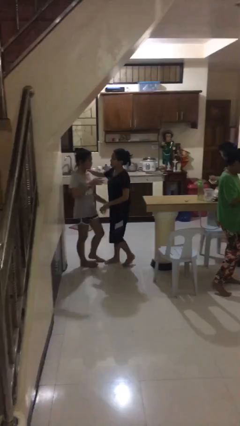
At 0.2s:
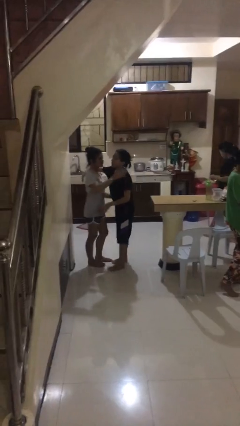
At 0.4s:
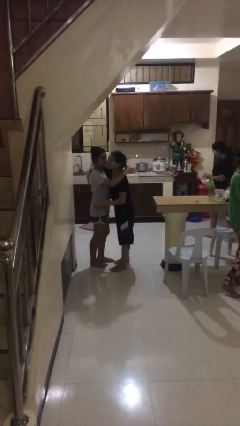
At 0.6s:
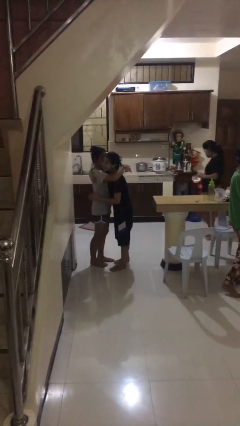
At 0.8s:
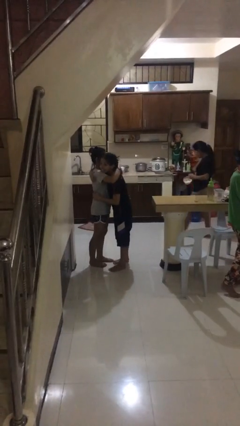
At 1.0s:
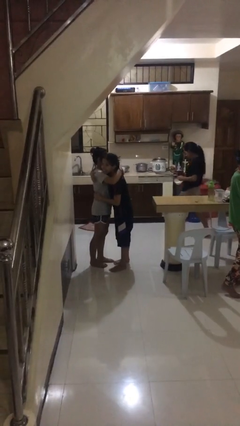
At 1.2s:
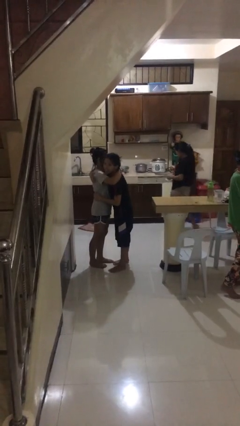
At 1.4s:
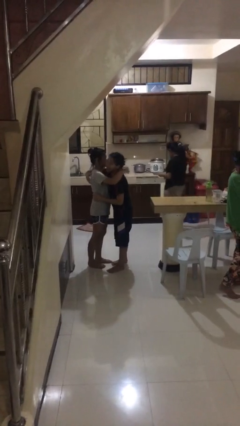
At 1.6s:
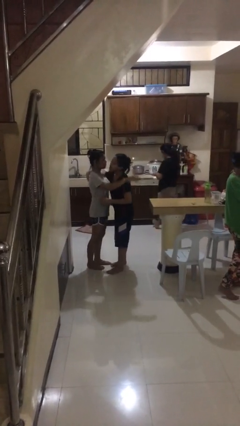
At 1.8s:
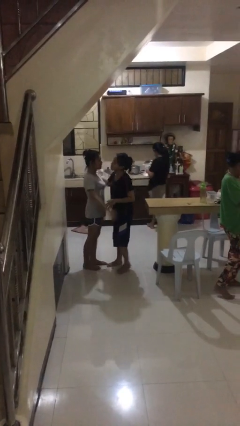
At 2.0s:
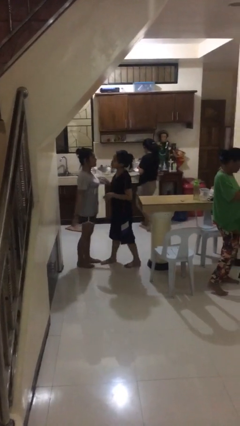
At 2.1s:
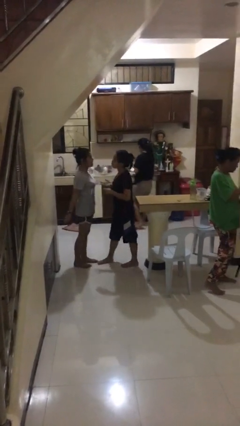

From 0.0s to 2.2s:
person embraces person

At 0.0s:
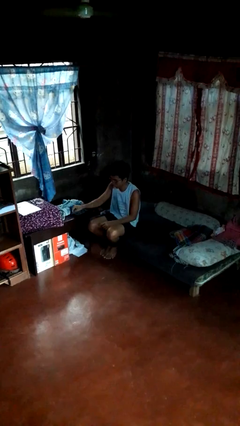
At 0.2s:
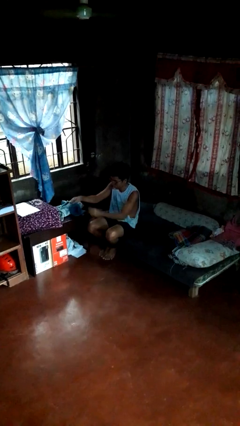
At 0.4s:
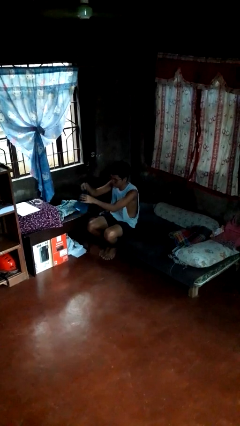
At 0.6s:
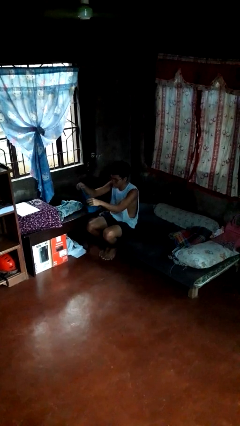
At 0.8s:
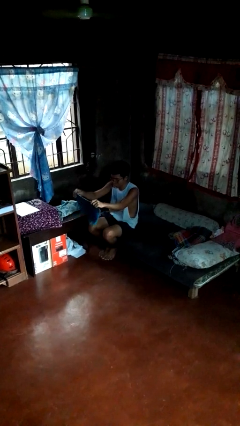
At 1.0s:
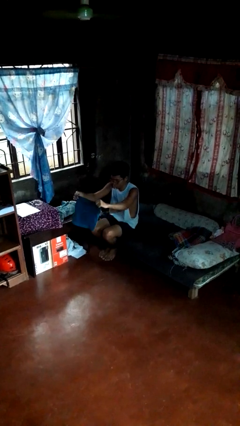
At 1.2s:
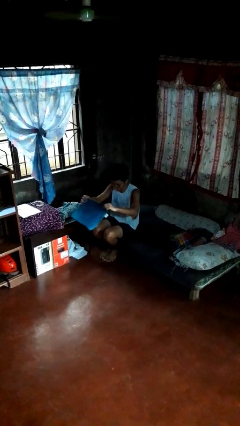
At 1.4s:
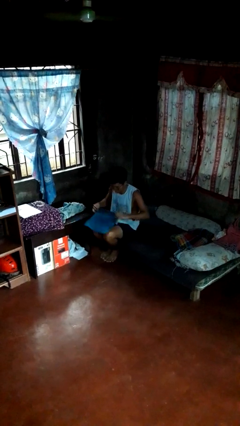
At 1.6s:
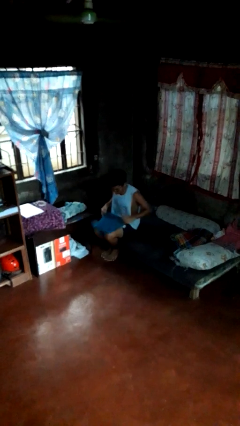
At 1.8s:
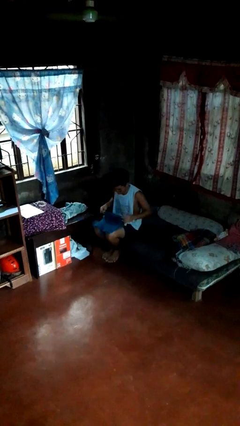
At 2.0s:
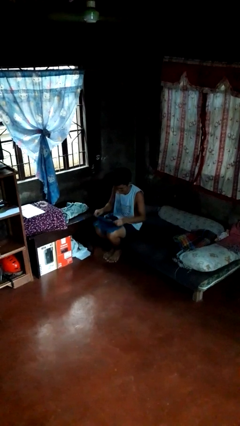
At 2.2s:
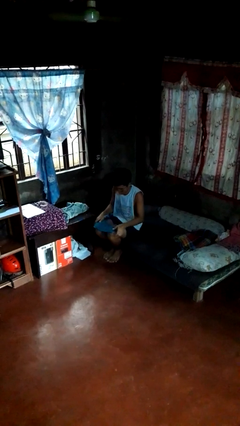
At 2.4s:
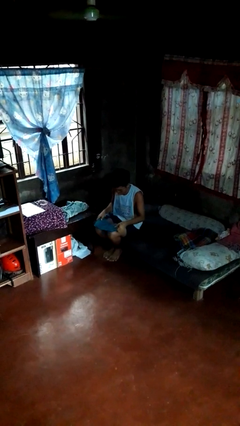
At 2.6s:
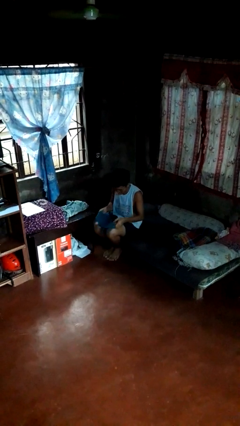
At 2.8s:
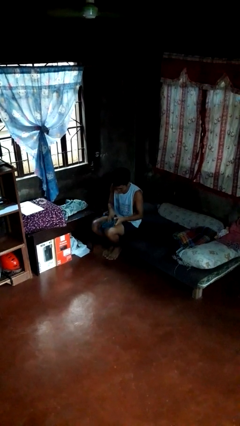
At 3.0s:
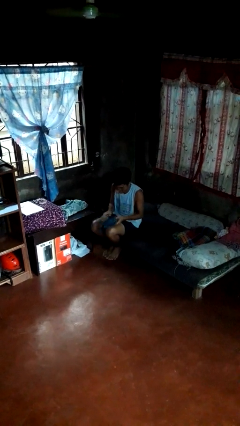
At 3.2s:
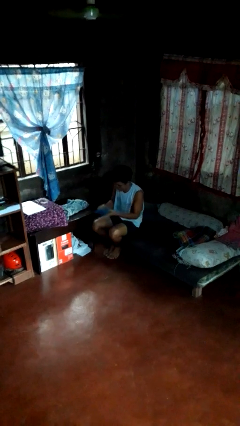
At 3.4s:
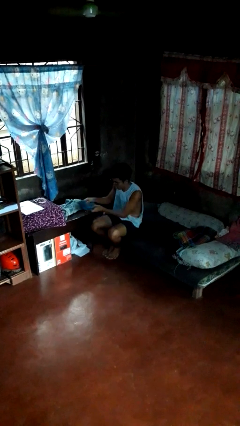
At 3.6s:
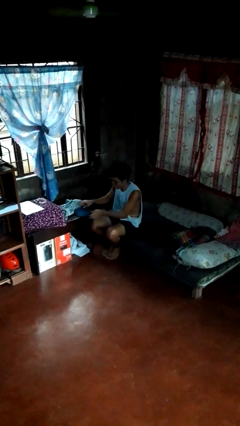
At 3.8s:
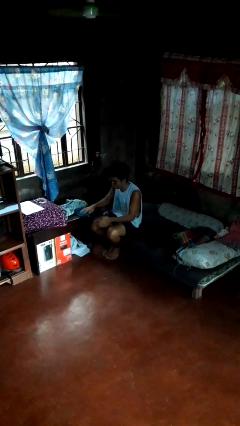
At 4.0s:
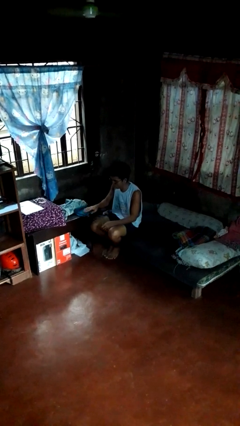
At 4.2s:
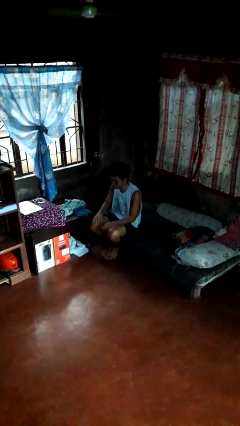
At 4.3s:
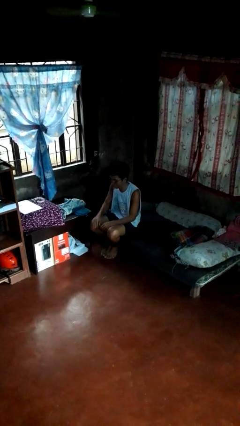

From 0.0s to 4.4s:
person folds towel

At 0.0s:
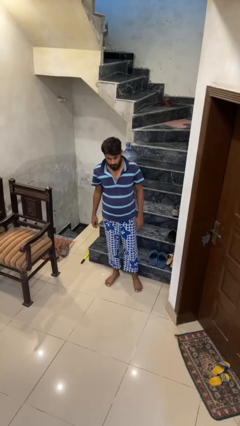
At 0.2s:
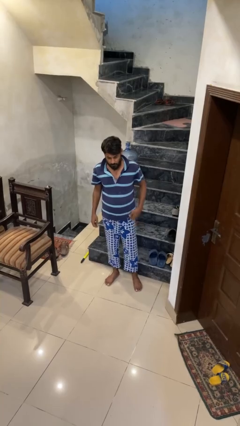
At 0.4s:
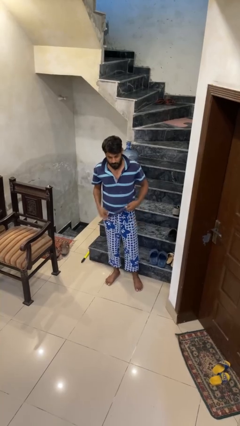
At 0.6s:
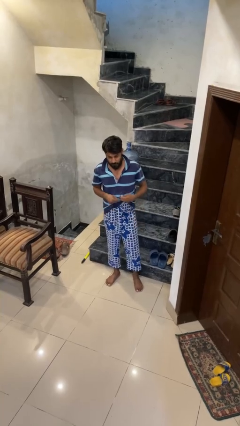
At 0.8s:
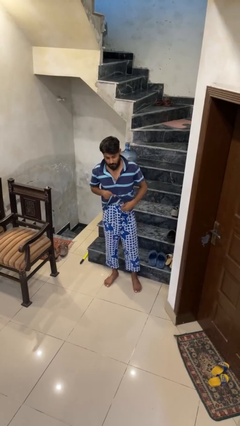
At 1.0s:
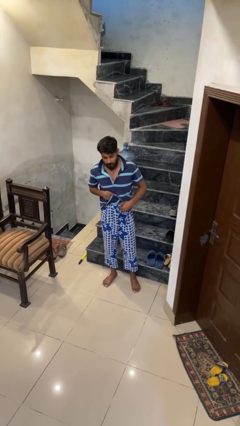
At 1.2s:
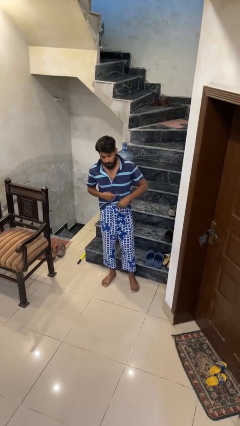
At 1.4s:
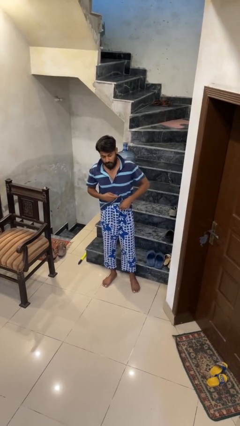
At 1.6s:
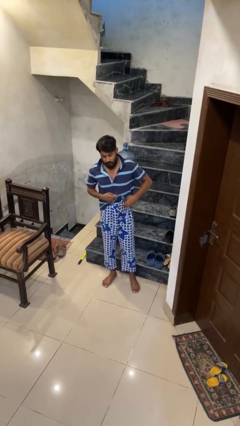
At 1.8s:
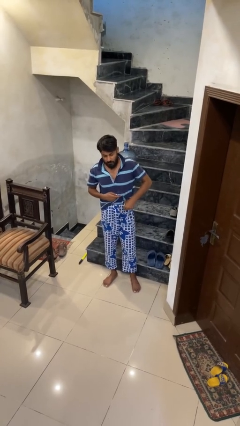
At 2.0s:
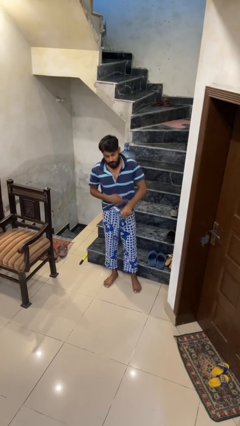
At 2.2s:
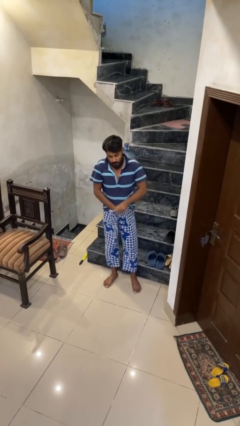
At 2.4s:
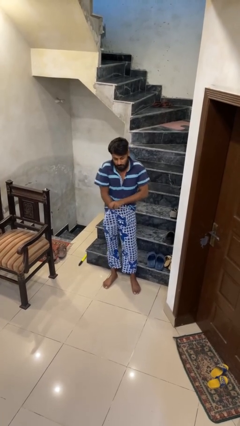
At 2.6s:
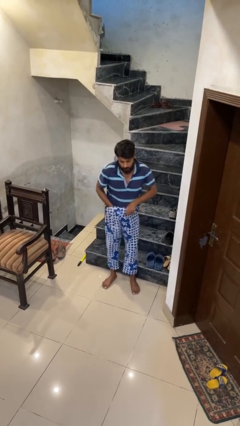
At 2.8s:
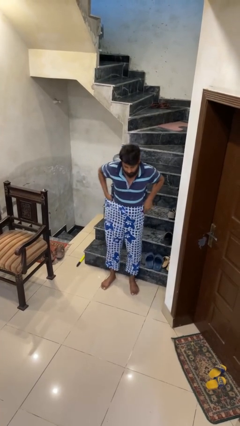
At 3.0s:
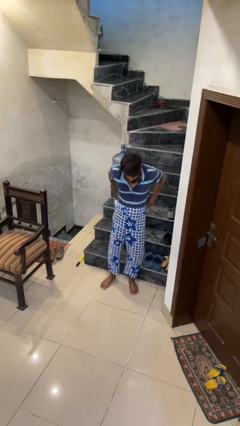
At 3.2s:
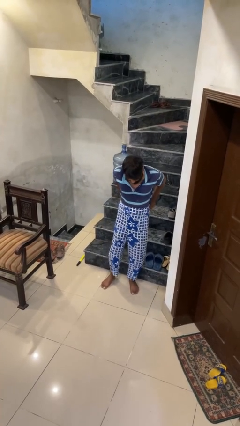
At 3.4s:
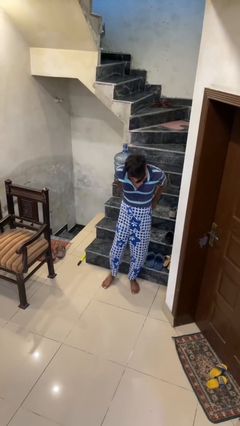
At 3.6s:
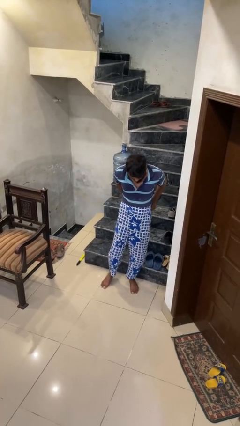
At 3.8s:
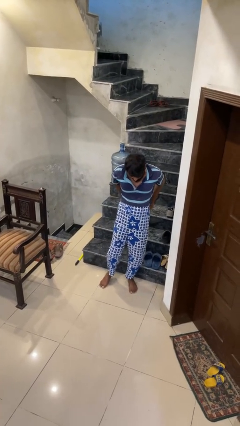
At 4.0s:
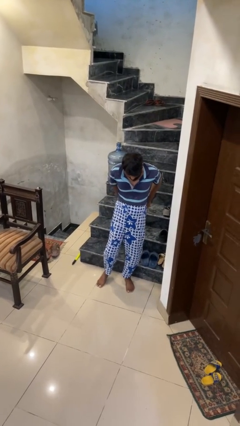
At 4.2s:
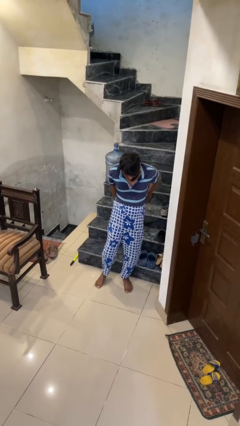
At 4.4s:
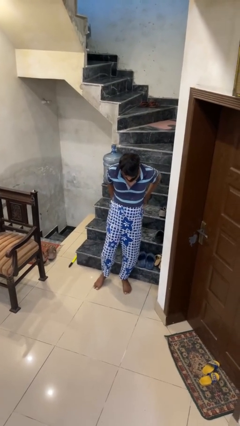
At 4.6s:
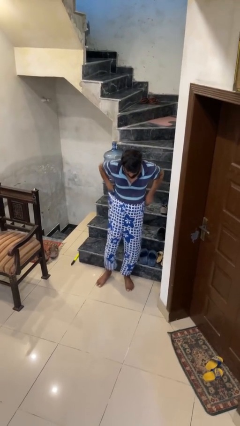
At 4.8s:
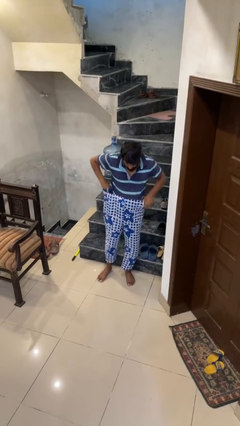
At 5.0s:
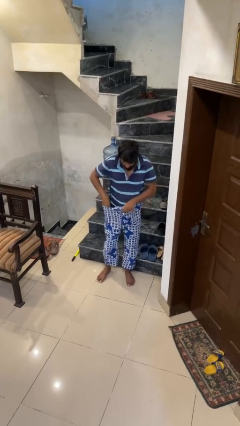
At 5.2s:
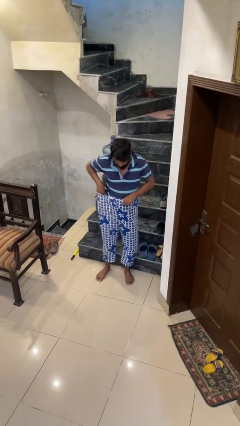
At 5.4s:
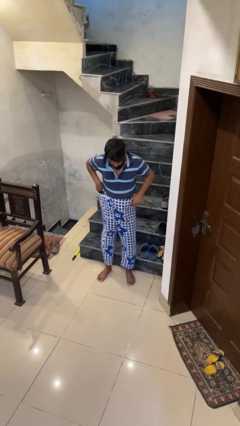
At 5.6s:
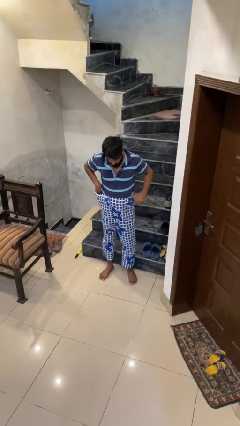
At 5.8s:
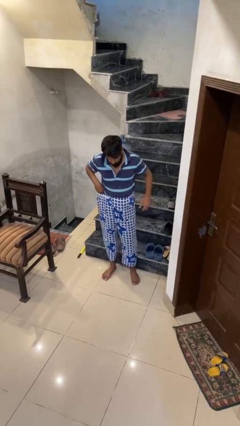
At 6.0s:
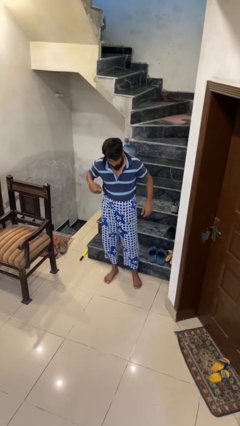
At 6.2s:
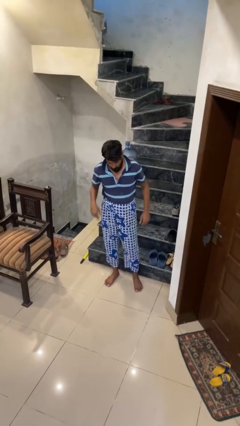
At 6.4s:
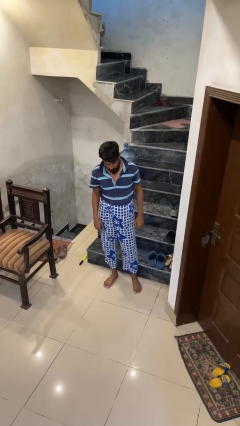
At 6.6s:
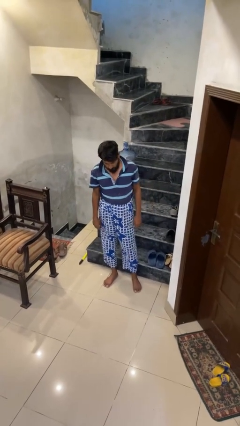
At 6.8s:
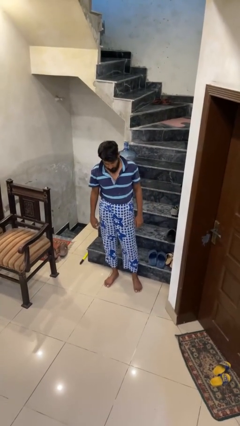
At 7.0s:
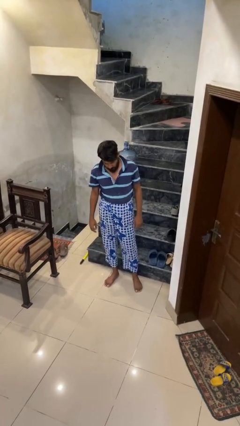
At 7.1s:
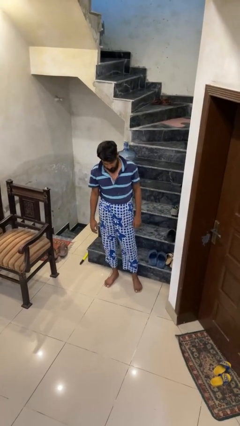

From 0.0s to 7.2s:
person tucks in shirt

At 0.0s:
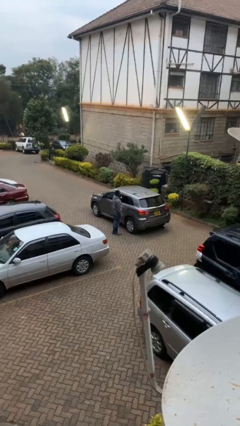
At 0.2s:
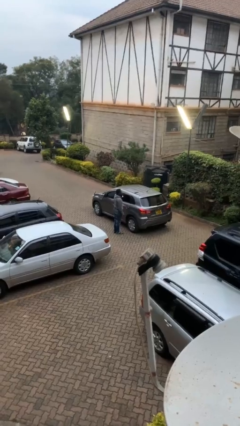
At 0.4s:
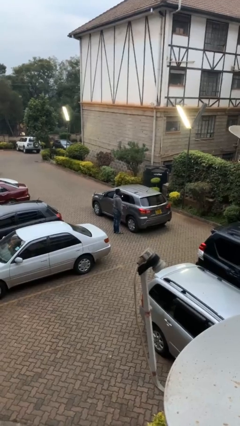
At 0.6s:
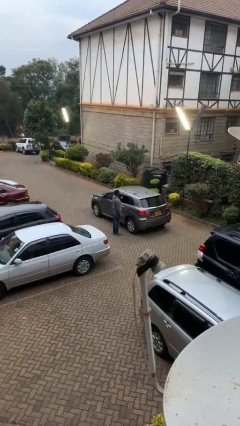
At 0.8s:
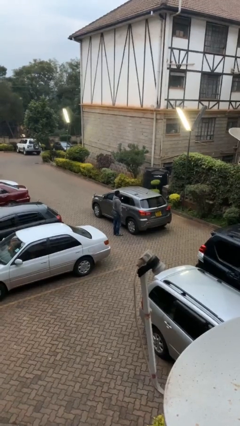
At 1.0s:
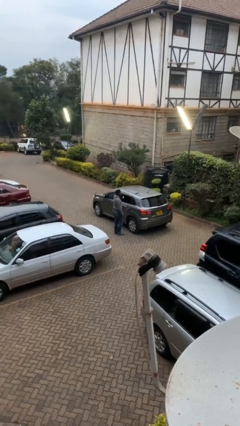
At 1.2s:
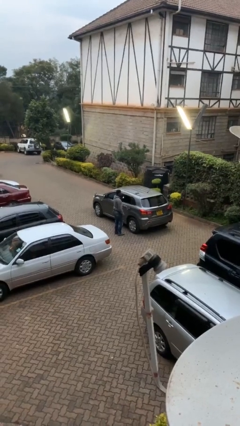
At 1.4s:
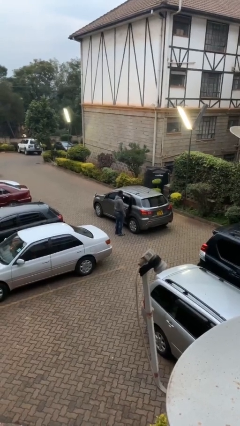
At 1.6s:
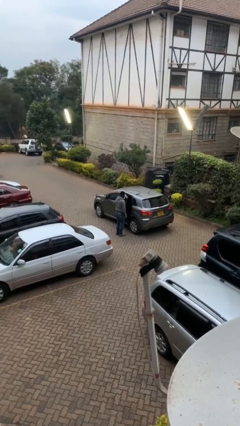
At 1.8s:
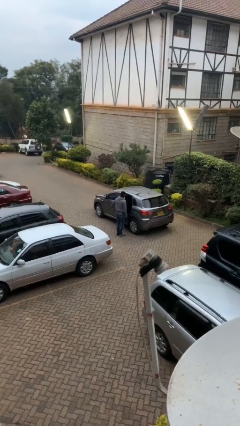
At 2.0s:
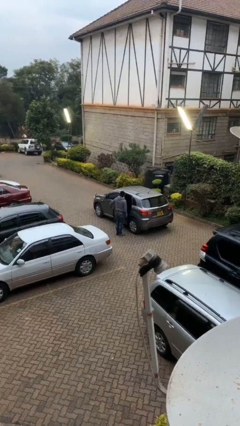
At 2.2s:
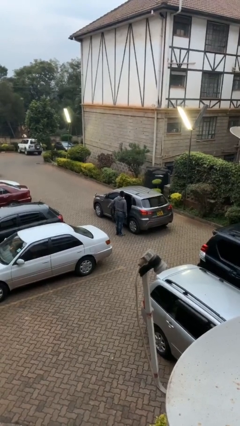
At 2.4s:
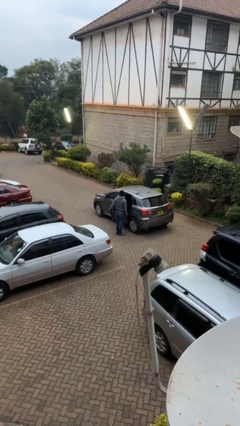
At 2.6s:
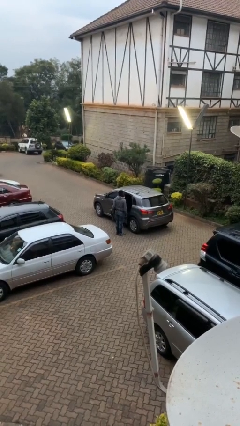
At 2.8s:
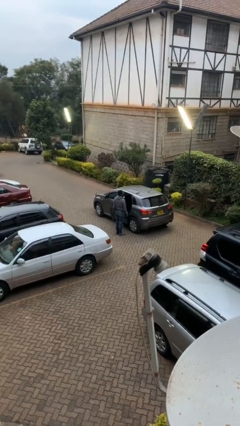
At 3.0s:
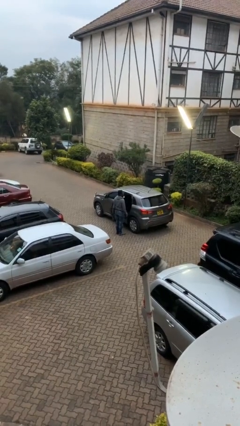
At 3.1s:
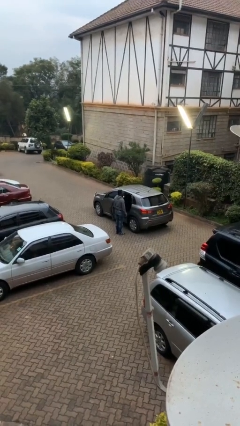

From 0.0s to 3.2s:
person opens car door

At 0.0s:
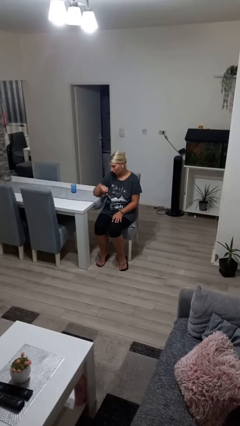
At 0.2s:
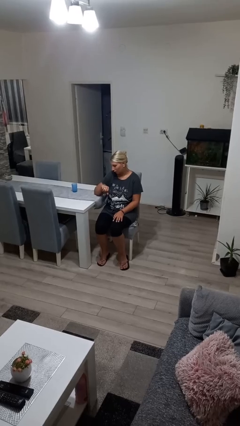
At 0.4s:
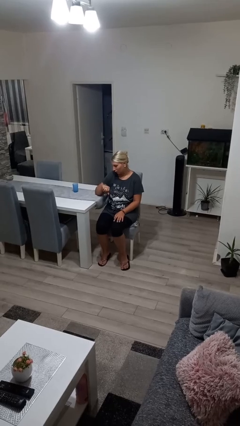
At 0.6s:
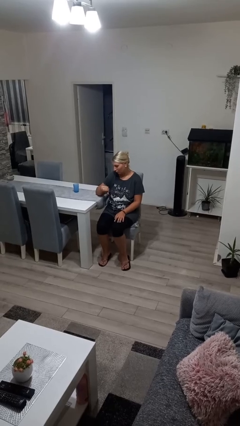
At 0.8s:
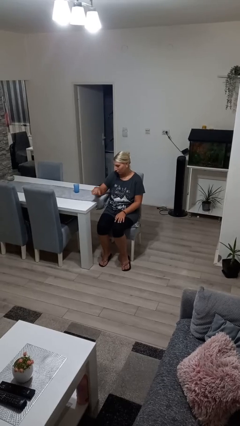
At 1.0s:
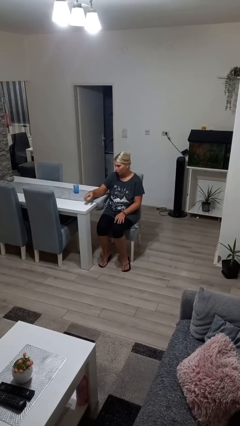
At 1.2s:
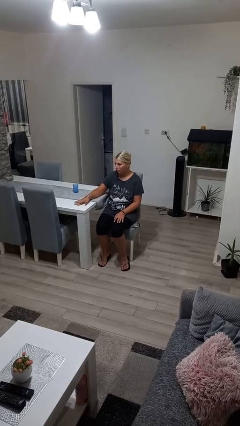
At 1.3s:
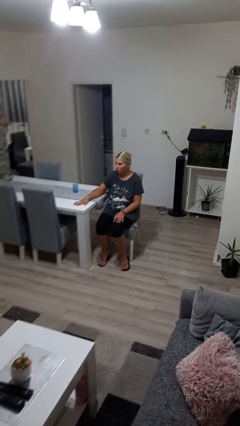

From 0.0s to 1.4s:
person looks at wristwatch
